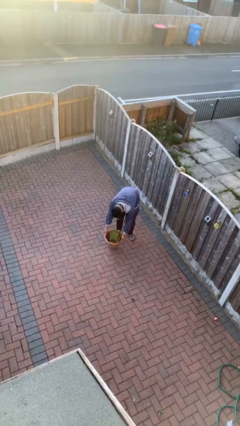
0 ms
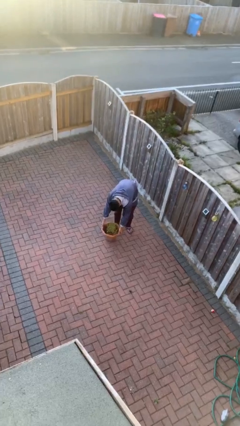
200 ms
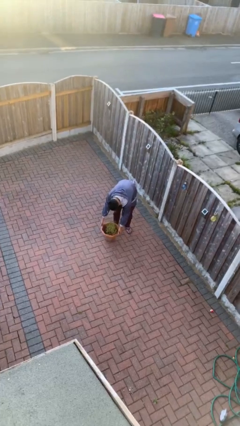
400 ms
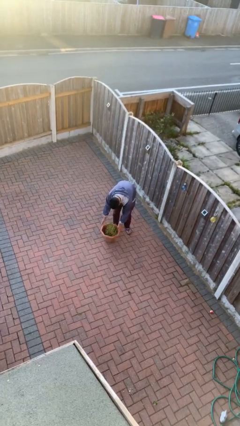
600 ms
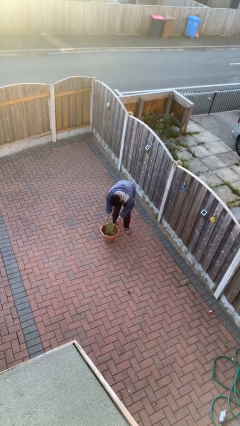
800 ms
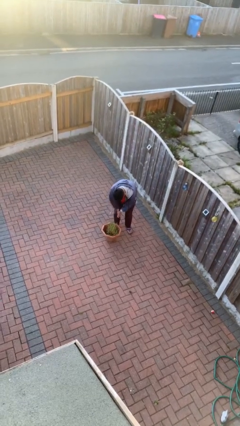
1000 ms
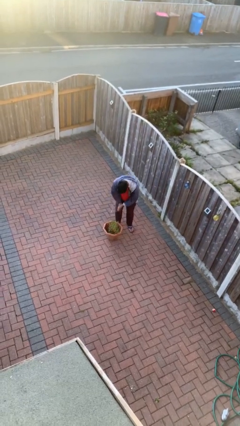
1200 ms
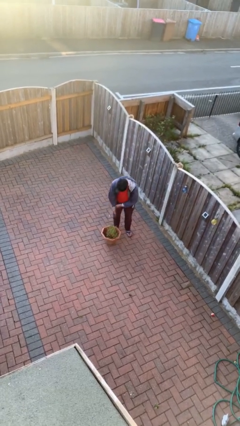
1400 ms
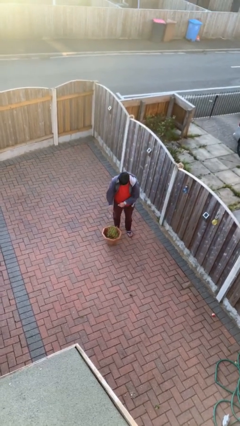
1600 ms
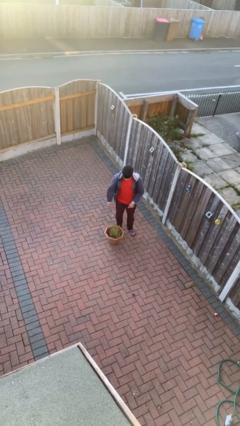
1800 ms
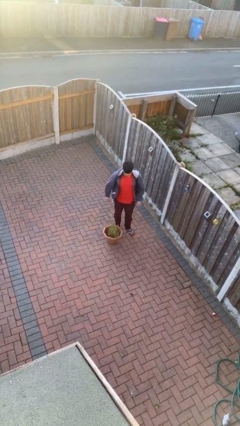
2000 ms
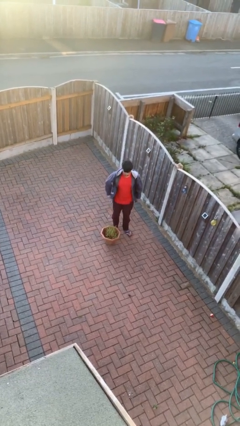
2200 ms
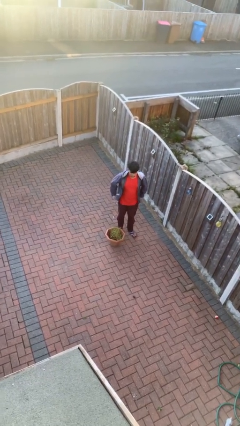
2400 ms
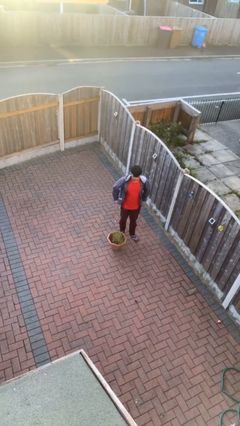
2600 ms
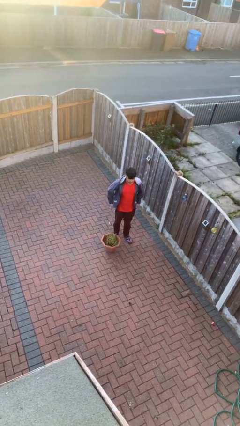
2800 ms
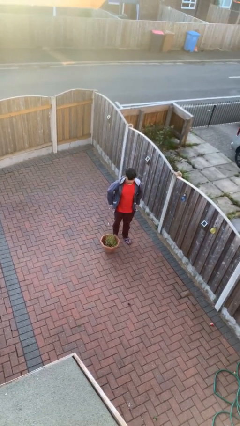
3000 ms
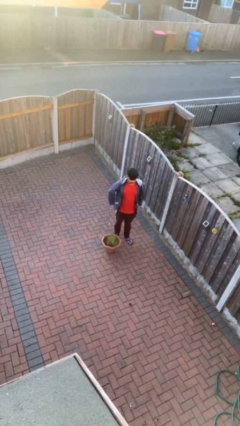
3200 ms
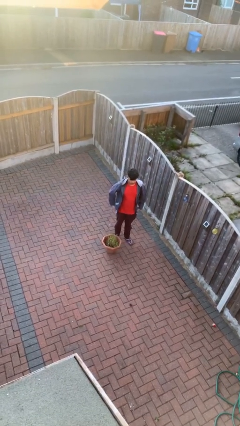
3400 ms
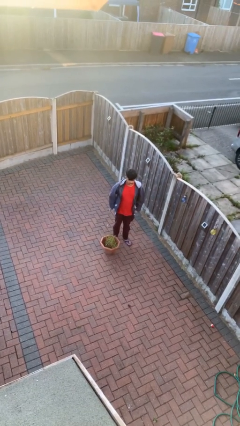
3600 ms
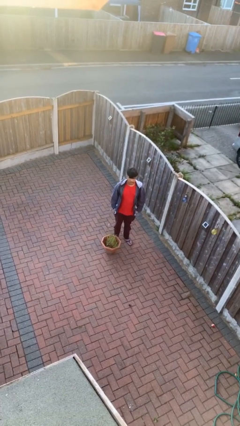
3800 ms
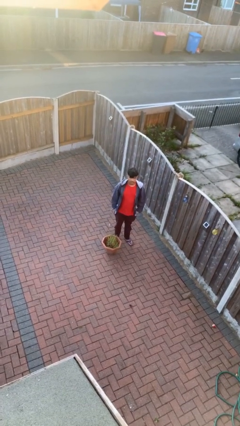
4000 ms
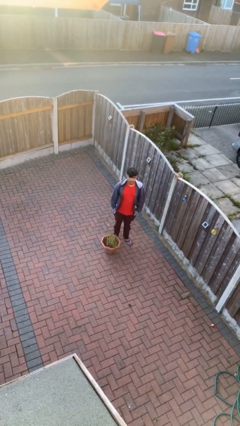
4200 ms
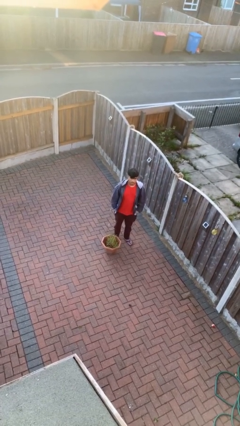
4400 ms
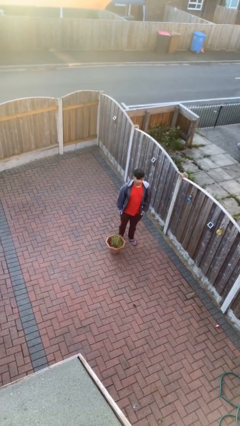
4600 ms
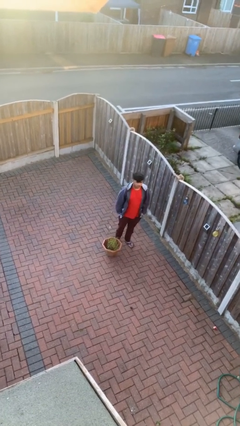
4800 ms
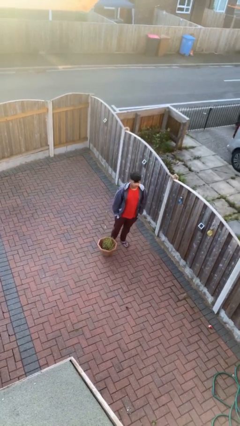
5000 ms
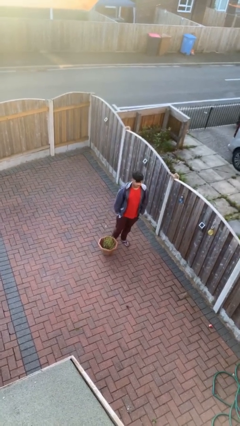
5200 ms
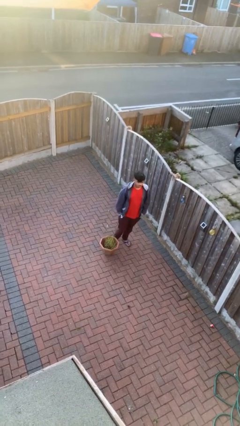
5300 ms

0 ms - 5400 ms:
person puts down object on floor

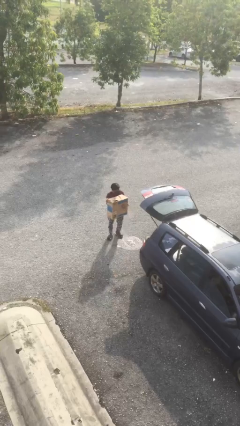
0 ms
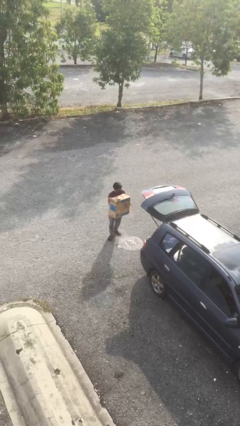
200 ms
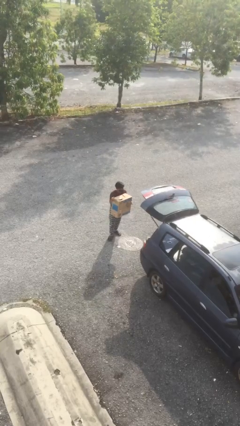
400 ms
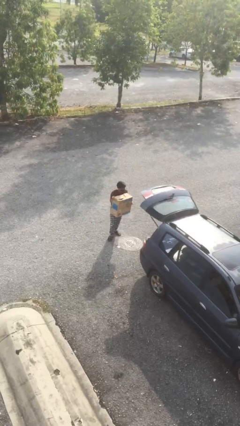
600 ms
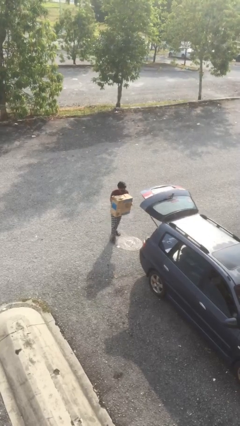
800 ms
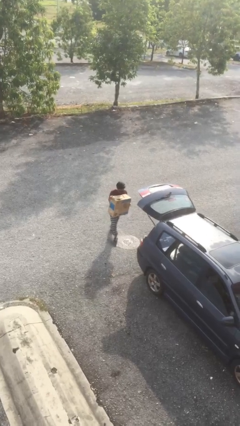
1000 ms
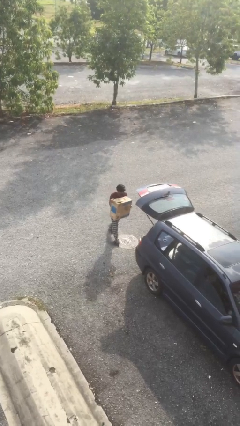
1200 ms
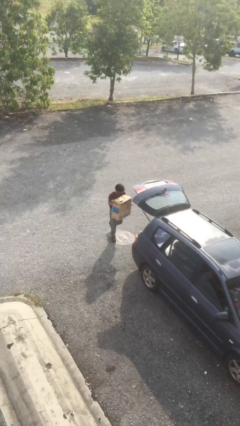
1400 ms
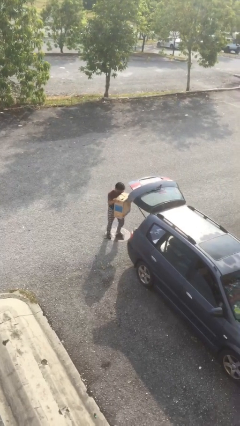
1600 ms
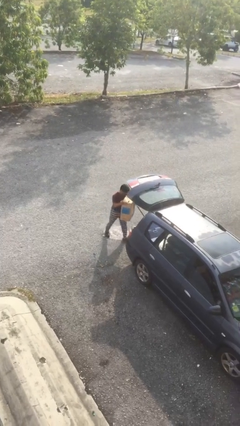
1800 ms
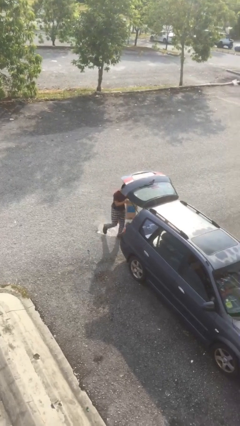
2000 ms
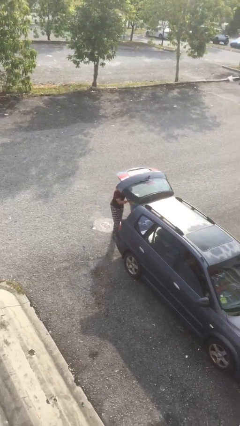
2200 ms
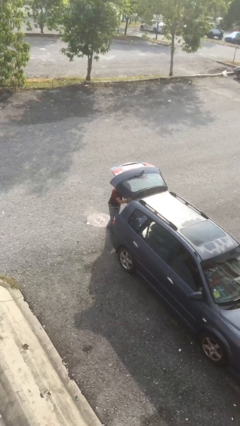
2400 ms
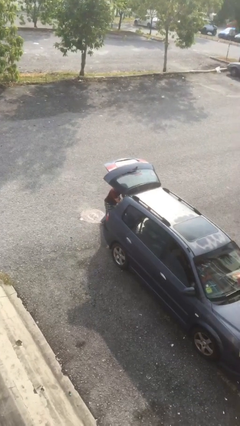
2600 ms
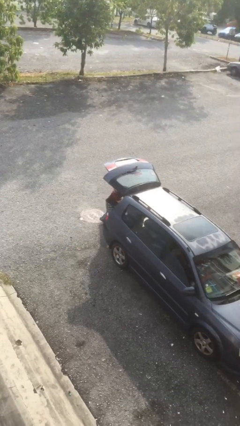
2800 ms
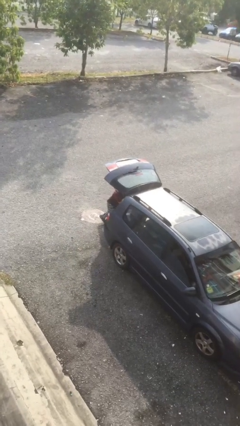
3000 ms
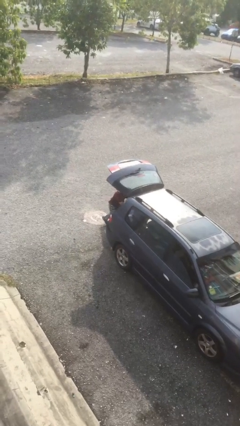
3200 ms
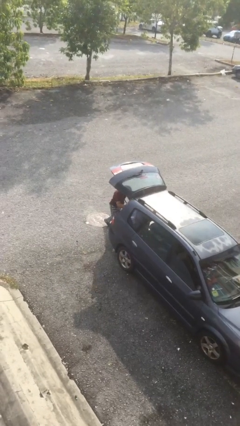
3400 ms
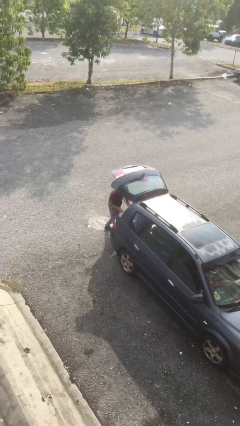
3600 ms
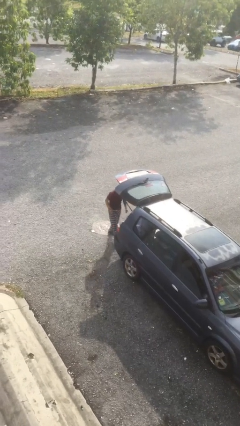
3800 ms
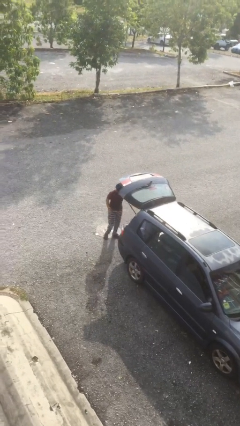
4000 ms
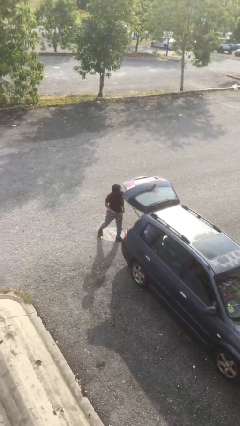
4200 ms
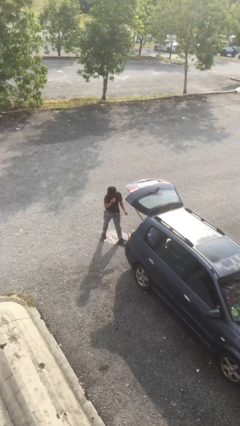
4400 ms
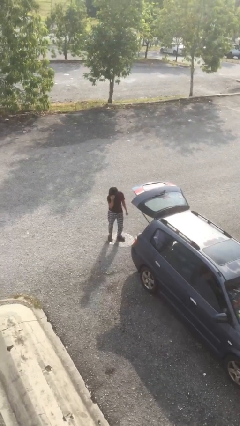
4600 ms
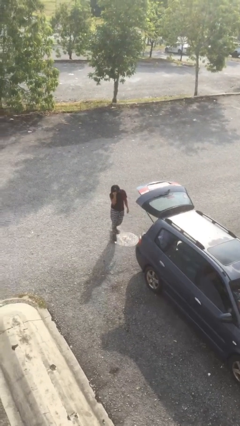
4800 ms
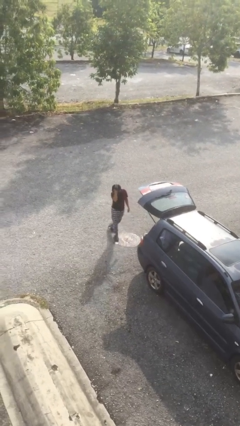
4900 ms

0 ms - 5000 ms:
person loads car

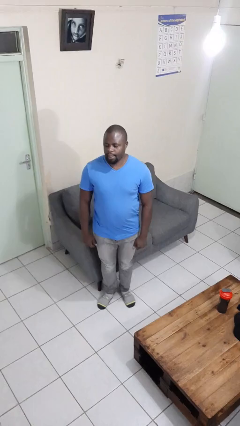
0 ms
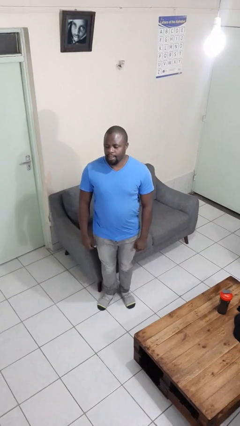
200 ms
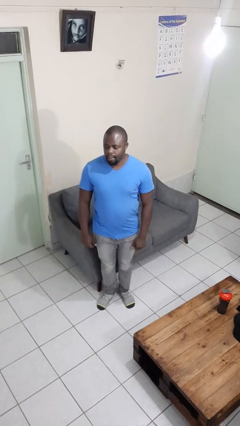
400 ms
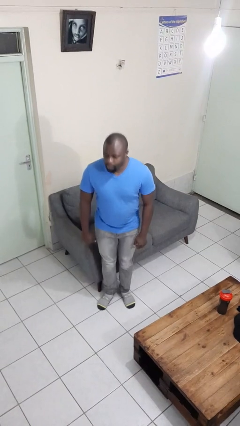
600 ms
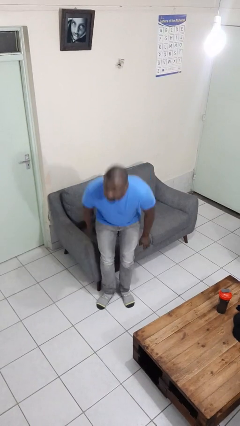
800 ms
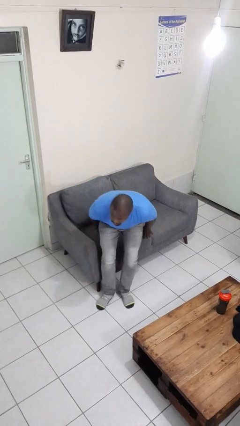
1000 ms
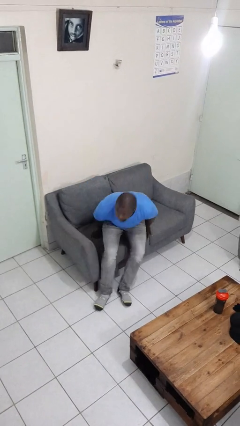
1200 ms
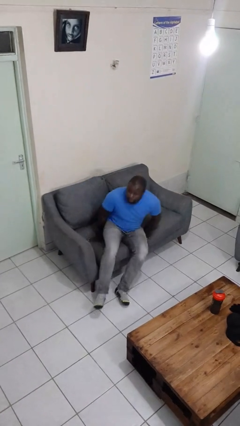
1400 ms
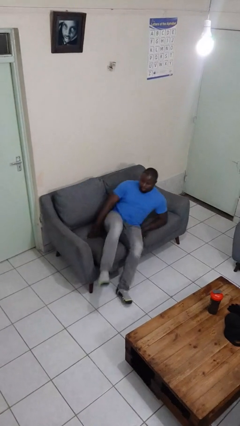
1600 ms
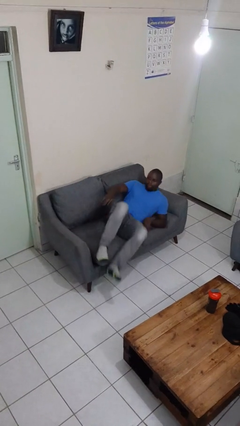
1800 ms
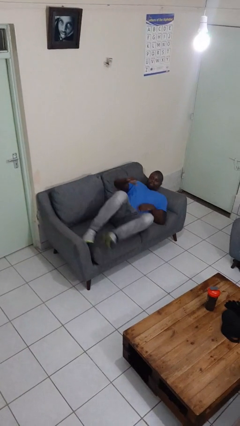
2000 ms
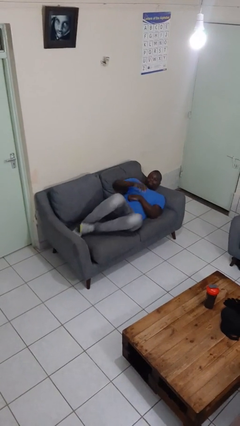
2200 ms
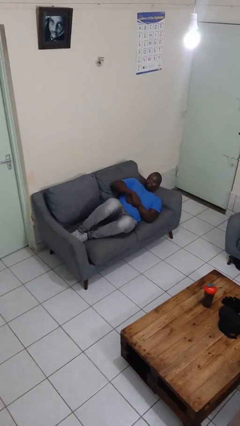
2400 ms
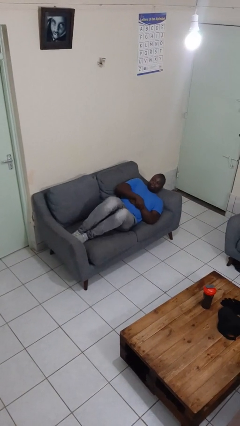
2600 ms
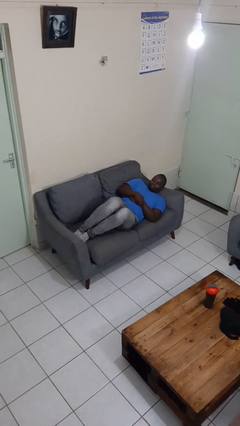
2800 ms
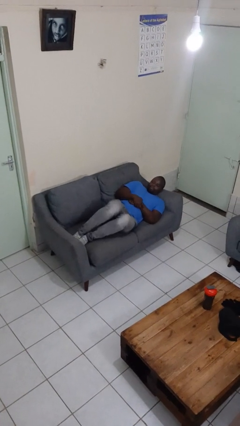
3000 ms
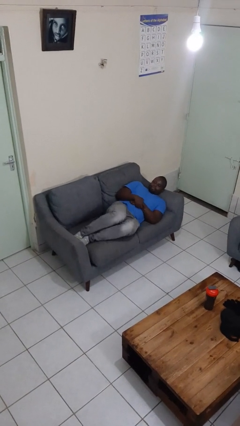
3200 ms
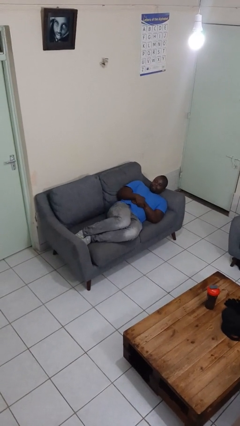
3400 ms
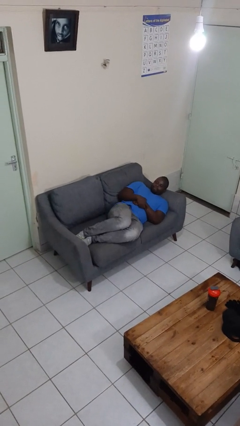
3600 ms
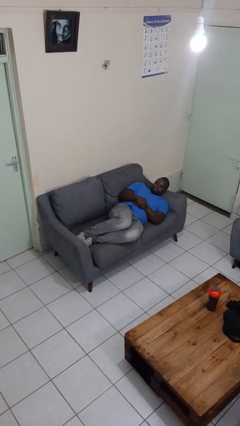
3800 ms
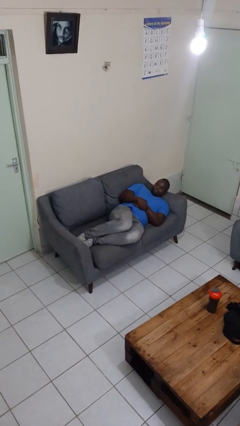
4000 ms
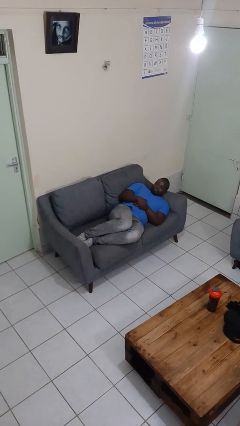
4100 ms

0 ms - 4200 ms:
person lies down on couch

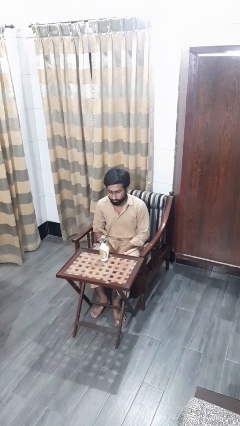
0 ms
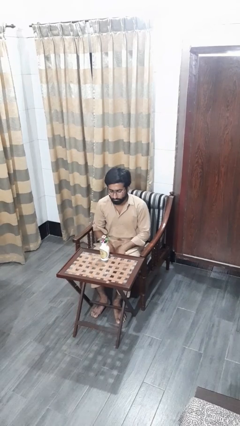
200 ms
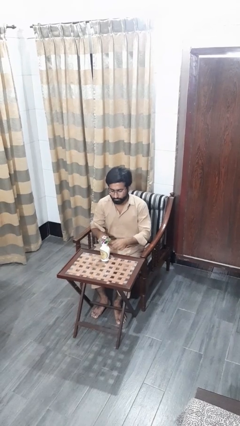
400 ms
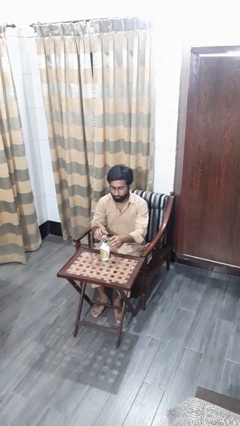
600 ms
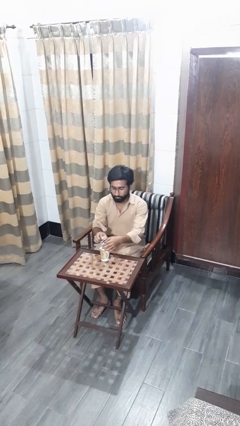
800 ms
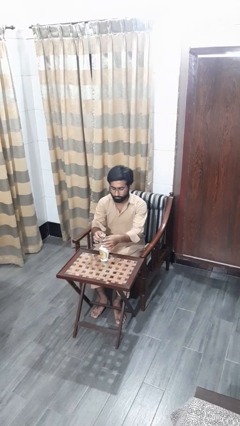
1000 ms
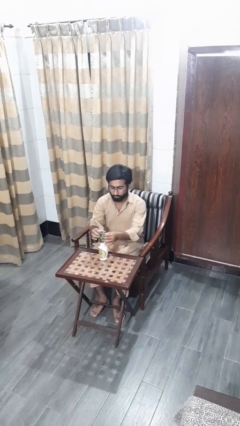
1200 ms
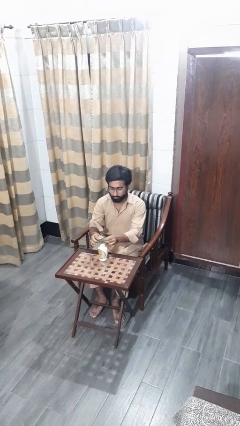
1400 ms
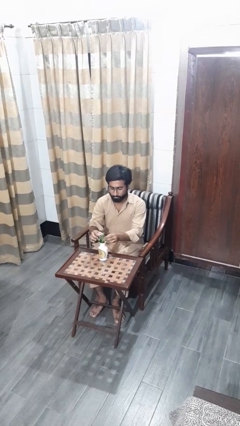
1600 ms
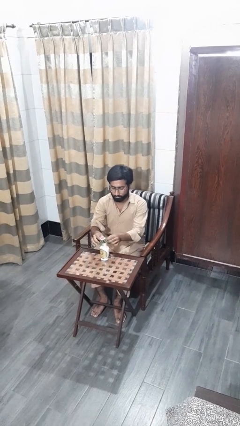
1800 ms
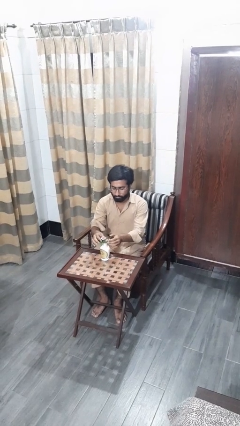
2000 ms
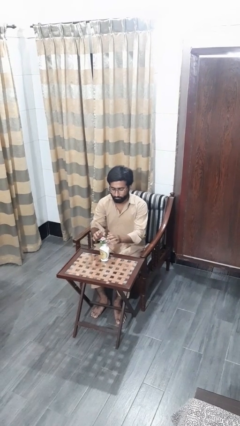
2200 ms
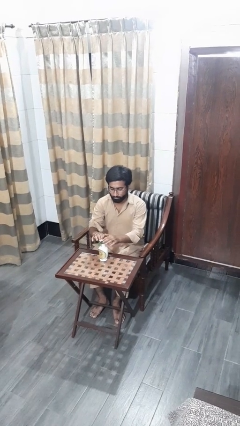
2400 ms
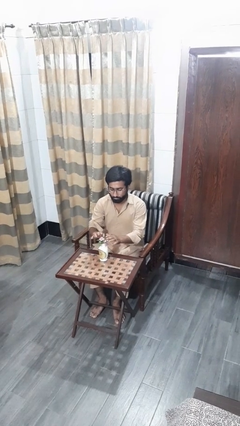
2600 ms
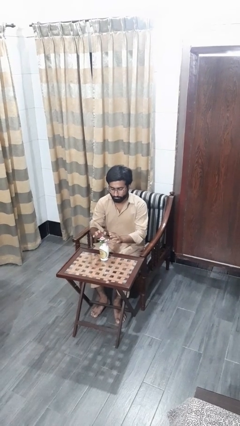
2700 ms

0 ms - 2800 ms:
person arranges flowers in vase

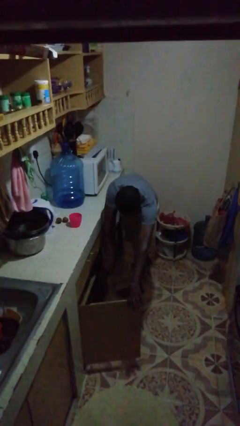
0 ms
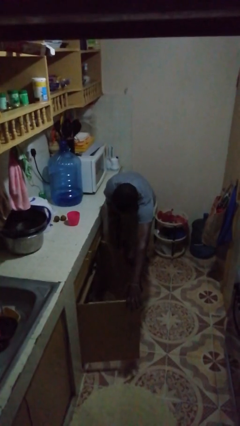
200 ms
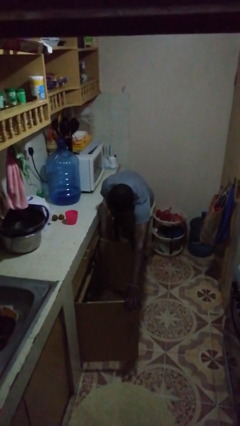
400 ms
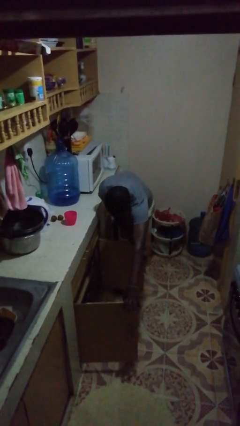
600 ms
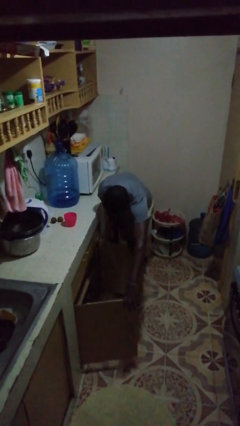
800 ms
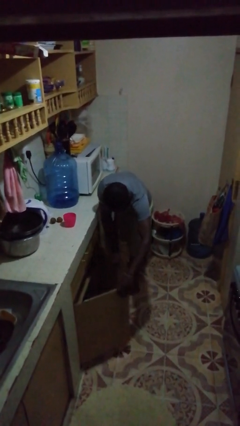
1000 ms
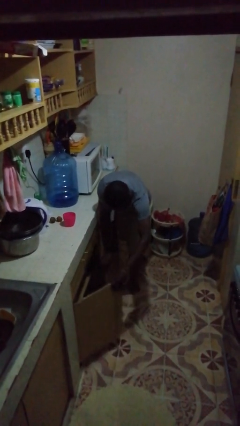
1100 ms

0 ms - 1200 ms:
person closes cabinet
